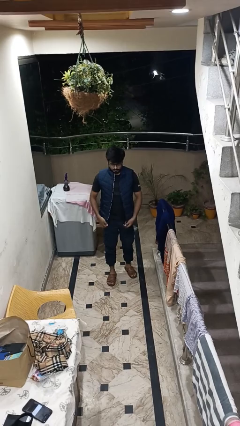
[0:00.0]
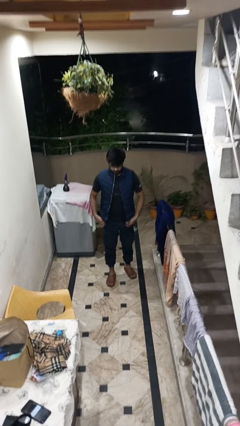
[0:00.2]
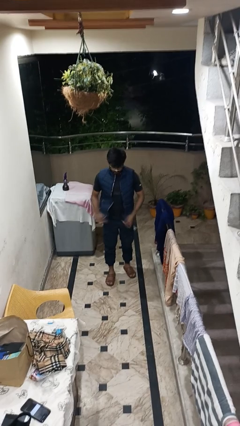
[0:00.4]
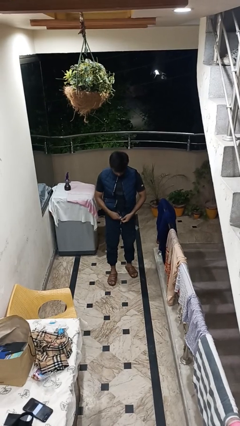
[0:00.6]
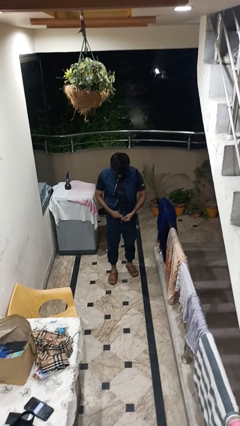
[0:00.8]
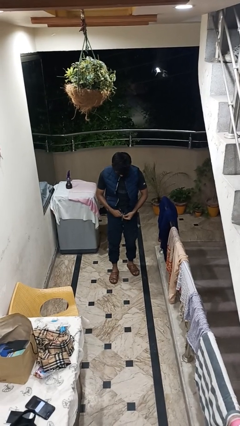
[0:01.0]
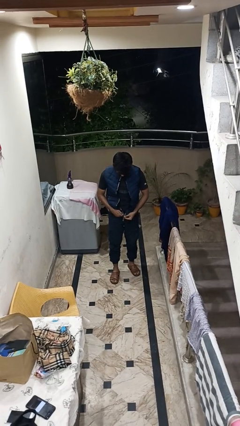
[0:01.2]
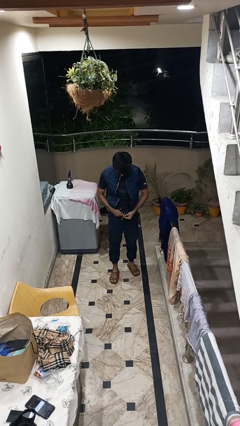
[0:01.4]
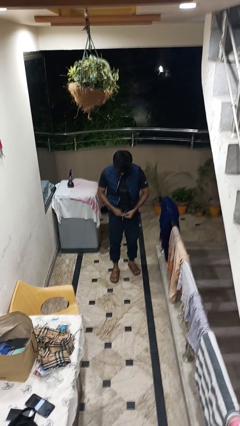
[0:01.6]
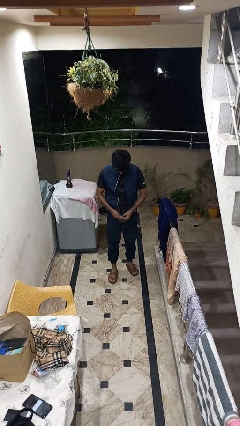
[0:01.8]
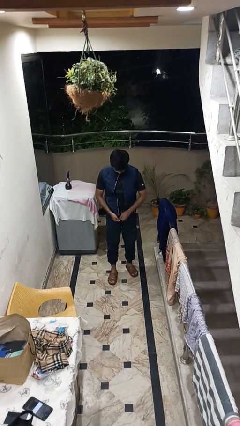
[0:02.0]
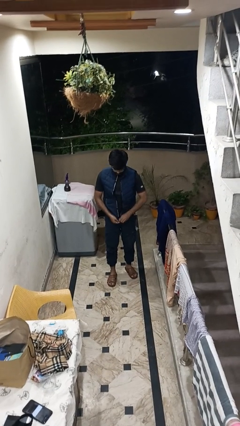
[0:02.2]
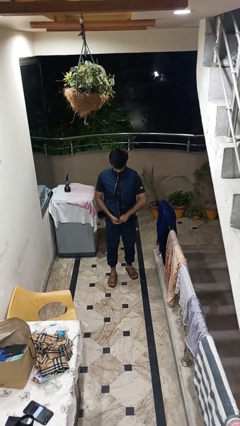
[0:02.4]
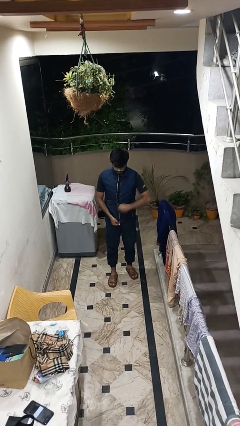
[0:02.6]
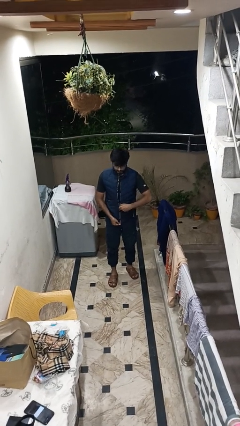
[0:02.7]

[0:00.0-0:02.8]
person zips up jacket

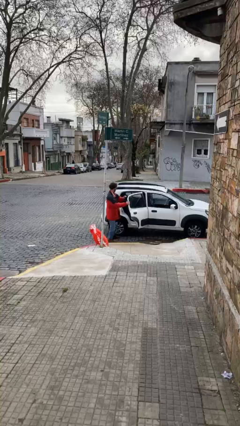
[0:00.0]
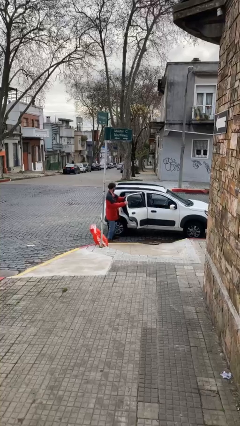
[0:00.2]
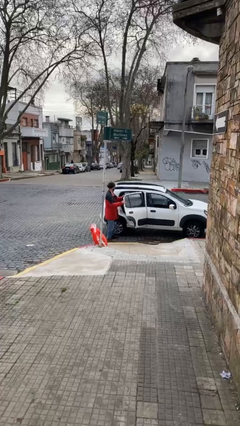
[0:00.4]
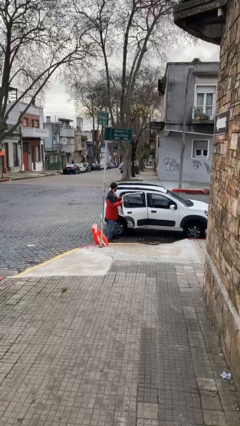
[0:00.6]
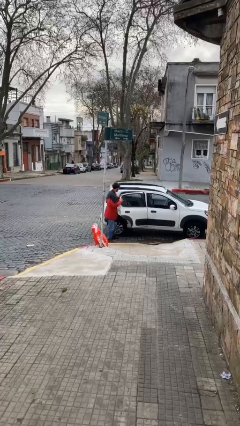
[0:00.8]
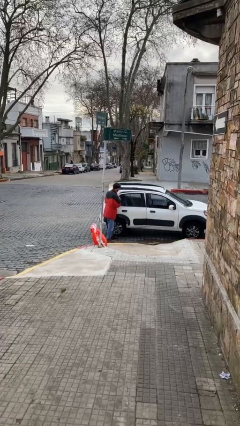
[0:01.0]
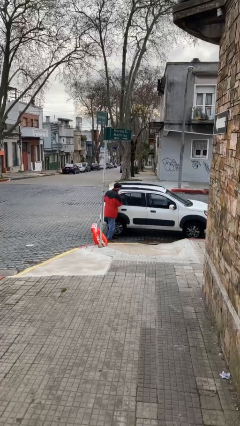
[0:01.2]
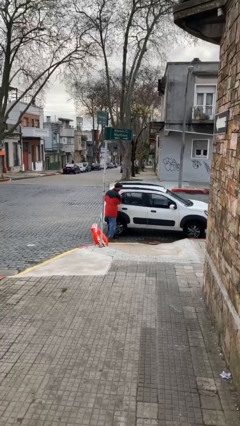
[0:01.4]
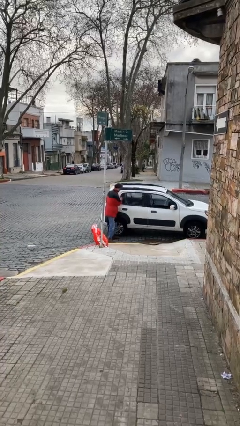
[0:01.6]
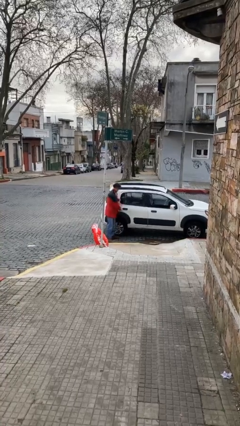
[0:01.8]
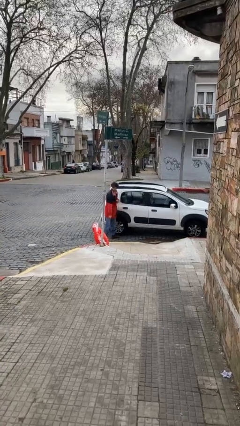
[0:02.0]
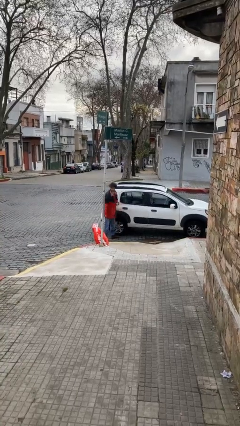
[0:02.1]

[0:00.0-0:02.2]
person closes car door

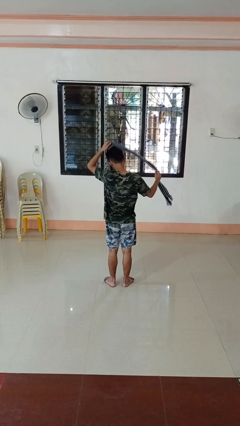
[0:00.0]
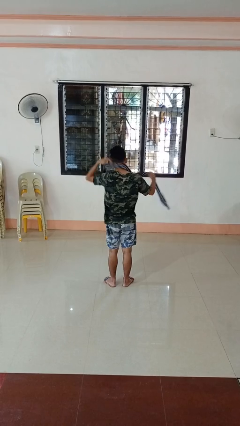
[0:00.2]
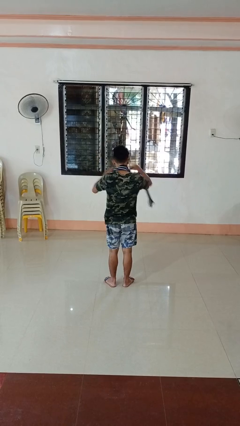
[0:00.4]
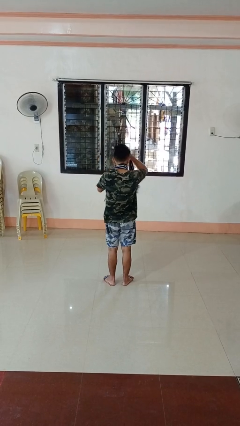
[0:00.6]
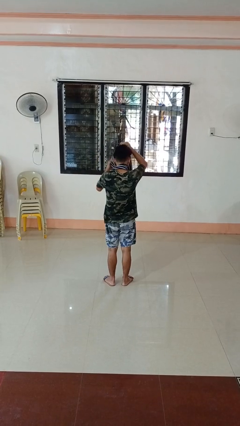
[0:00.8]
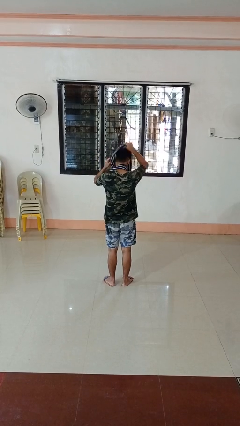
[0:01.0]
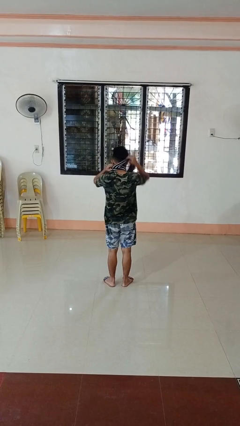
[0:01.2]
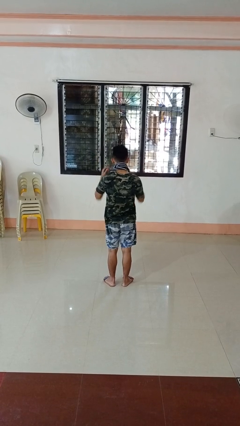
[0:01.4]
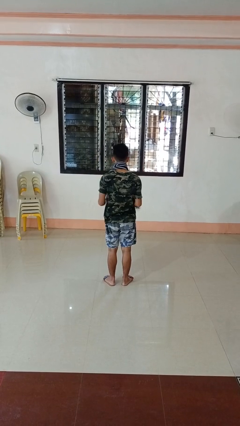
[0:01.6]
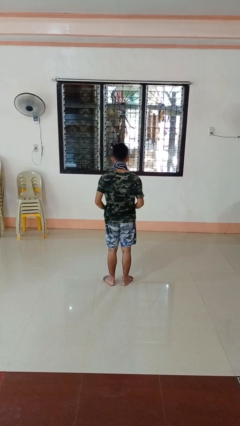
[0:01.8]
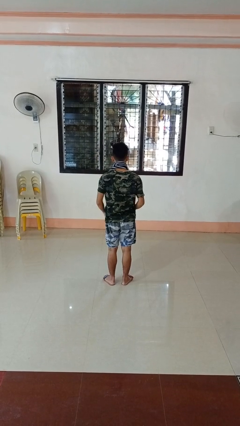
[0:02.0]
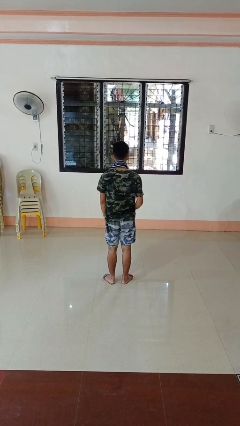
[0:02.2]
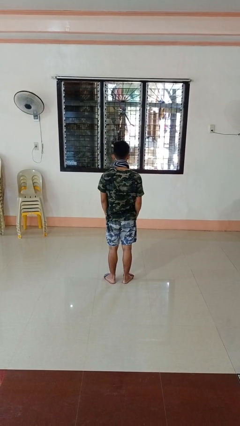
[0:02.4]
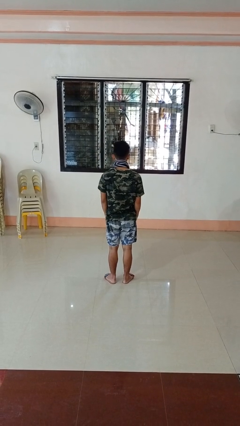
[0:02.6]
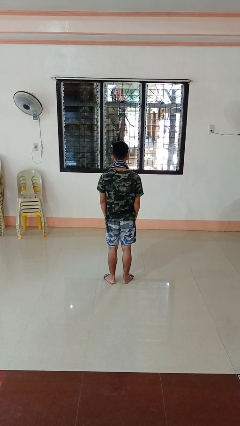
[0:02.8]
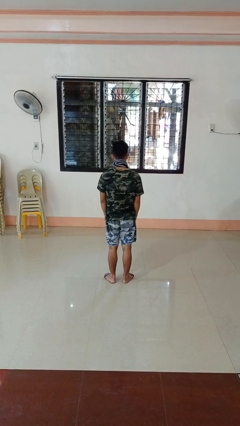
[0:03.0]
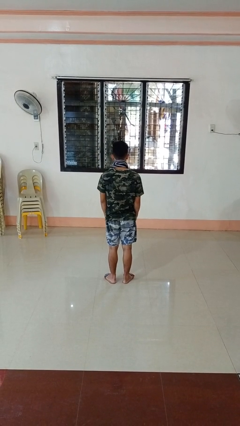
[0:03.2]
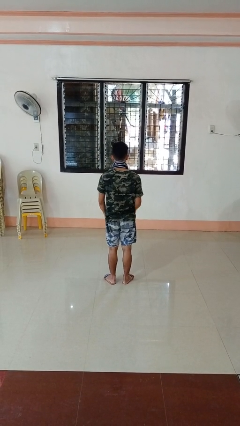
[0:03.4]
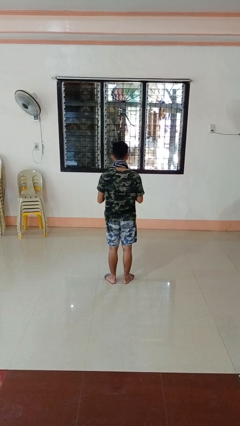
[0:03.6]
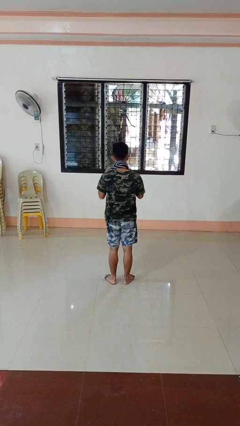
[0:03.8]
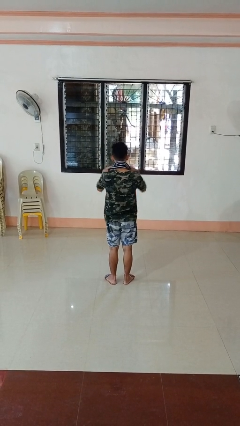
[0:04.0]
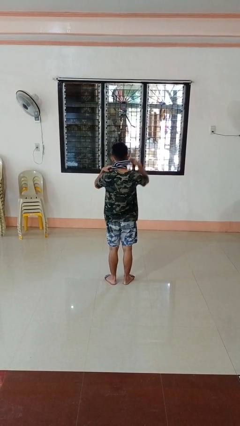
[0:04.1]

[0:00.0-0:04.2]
person puts on scarf

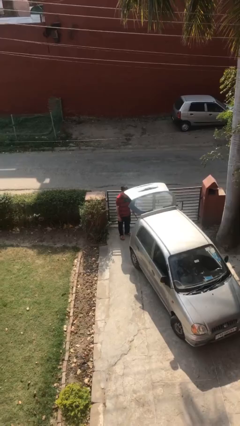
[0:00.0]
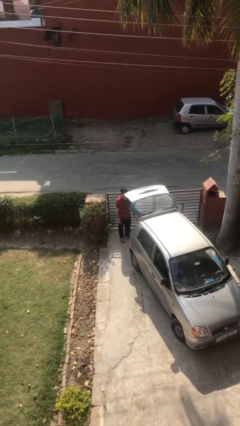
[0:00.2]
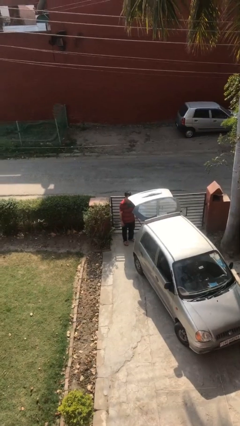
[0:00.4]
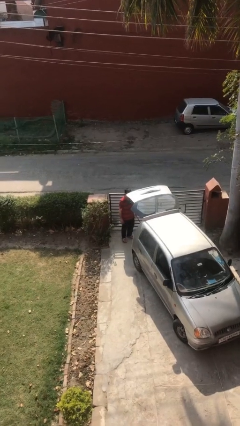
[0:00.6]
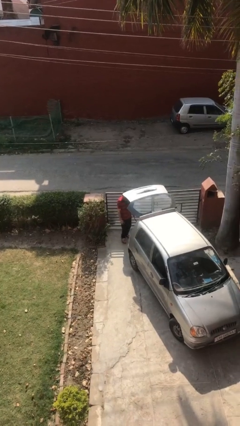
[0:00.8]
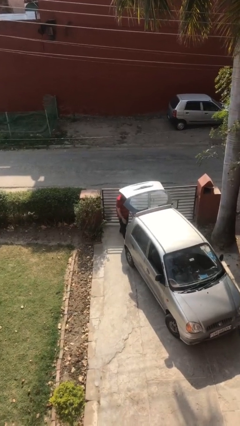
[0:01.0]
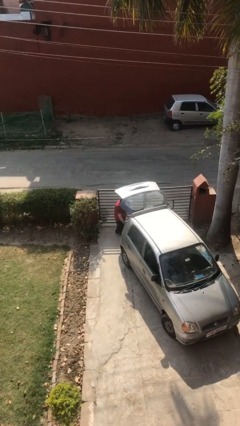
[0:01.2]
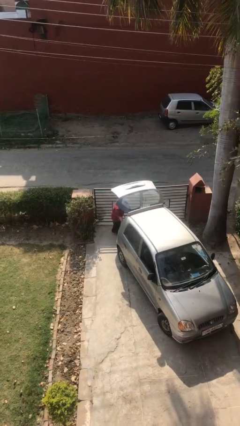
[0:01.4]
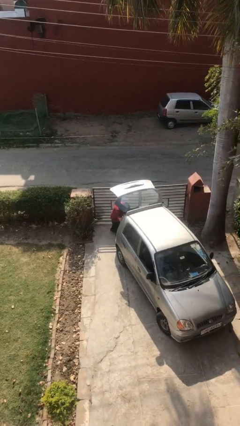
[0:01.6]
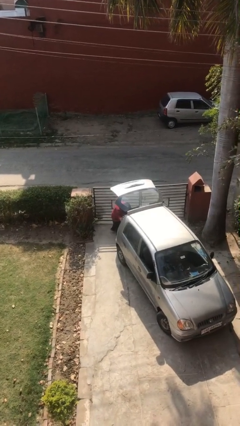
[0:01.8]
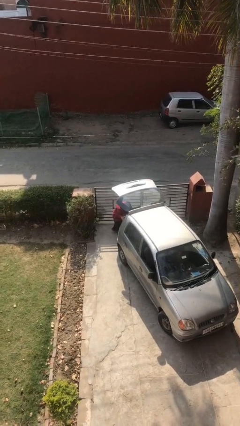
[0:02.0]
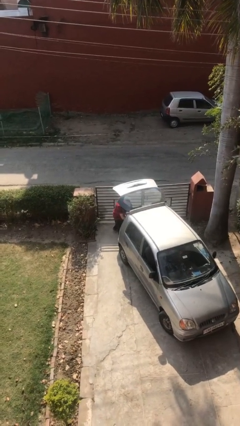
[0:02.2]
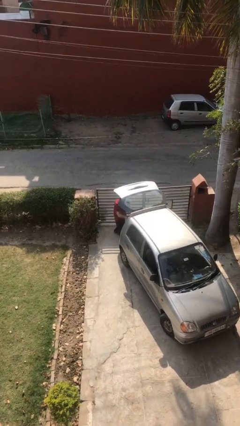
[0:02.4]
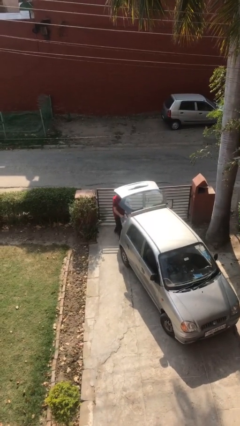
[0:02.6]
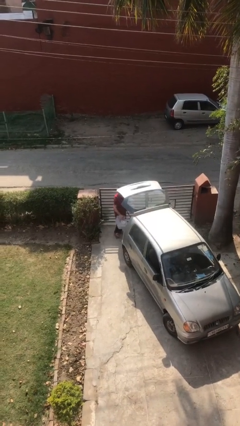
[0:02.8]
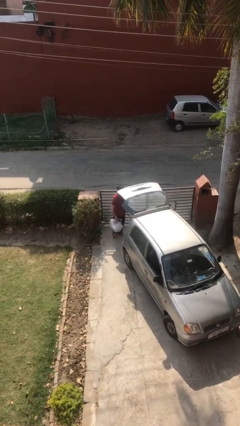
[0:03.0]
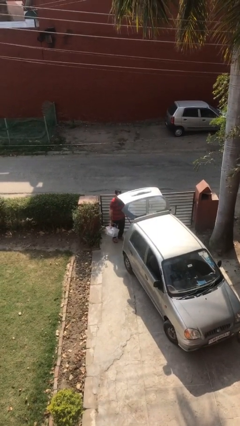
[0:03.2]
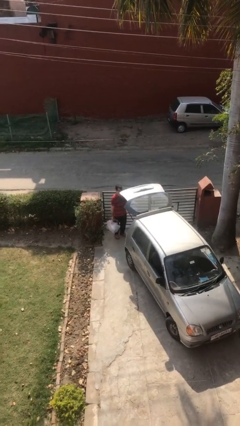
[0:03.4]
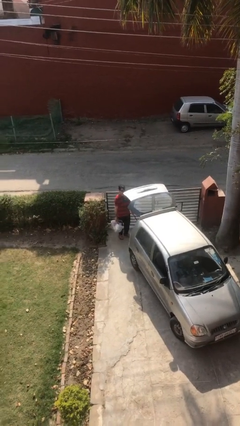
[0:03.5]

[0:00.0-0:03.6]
person unloads car

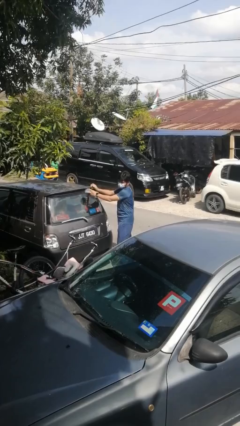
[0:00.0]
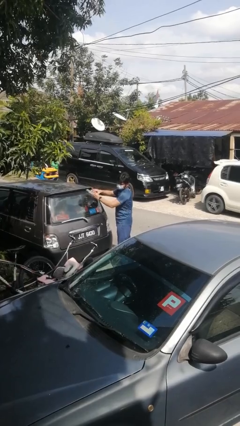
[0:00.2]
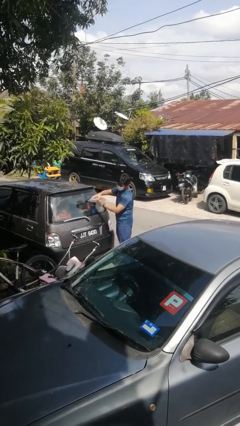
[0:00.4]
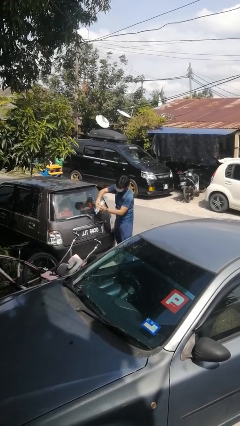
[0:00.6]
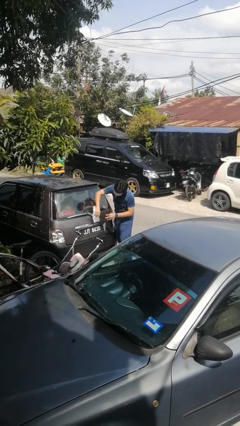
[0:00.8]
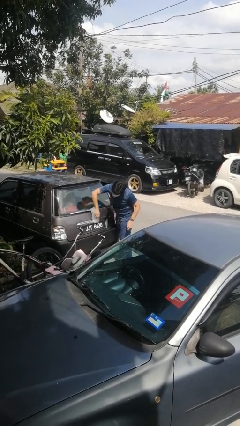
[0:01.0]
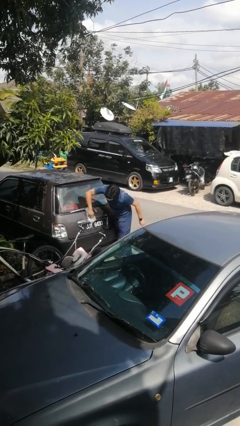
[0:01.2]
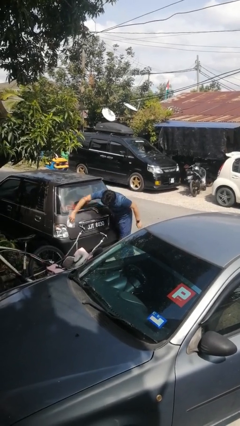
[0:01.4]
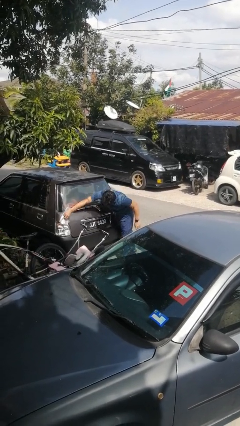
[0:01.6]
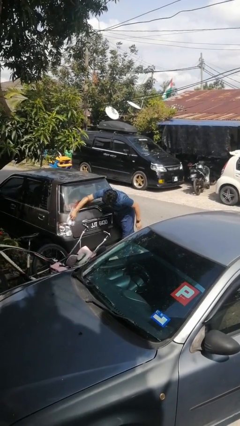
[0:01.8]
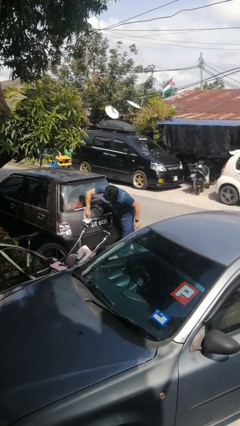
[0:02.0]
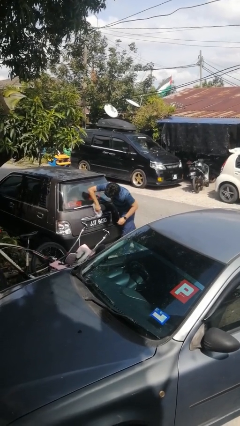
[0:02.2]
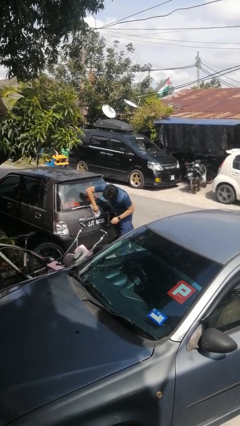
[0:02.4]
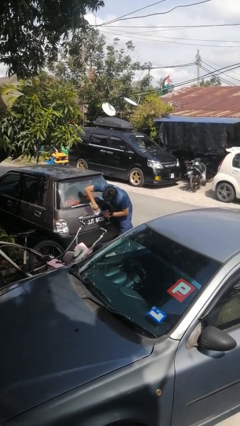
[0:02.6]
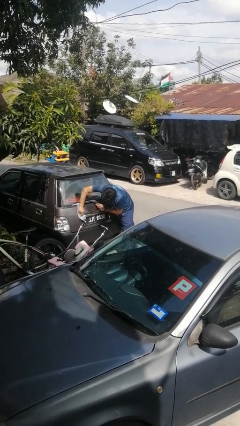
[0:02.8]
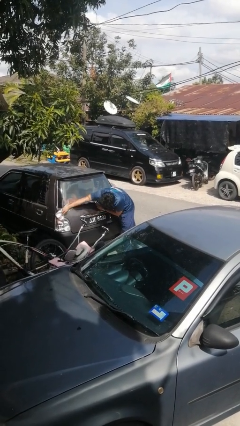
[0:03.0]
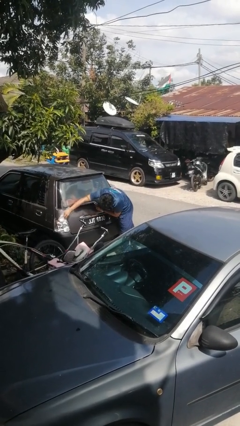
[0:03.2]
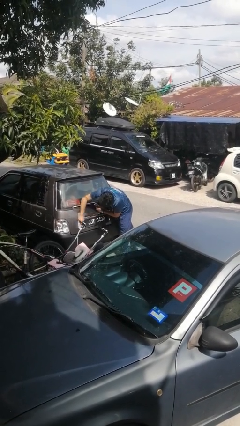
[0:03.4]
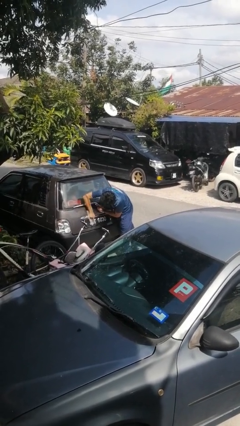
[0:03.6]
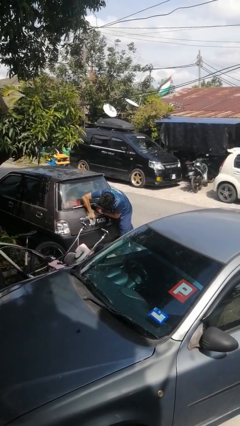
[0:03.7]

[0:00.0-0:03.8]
person polishes car with rag

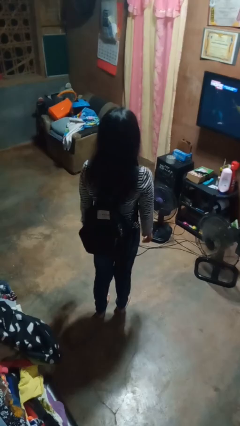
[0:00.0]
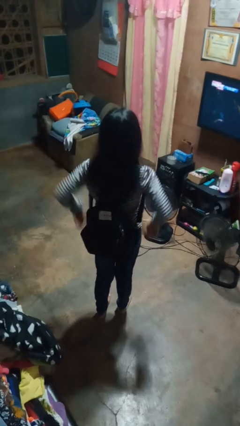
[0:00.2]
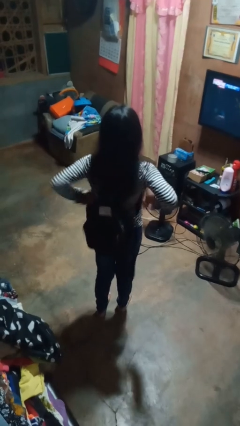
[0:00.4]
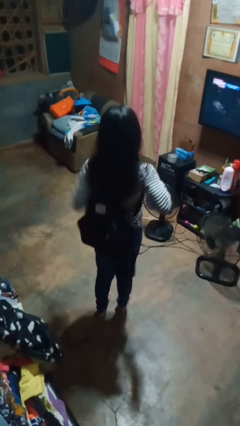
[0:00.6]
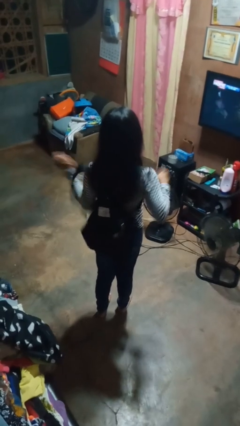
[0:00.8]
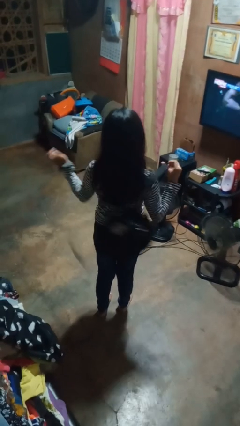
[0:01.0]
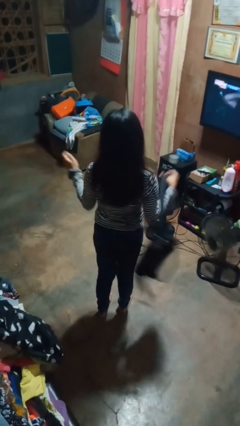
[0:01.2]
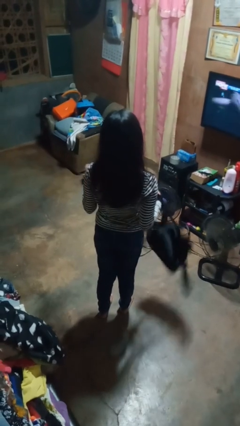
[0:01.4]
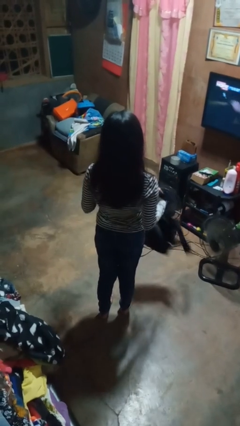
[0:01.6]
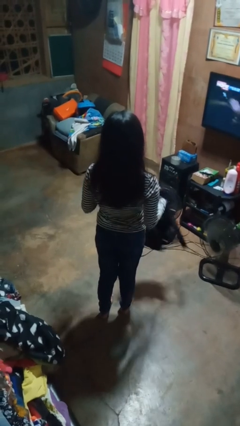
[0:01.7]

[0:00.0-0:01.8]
person takes off backpack
